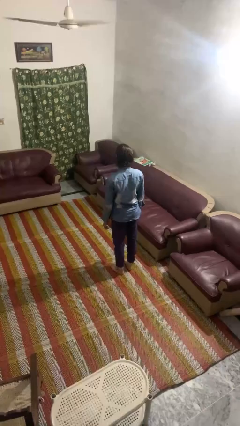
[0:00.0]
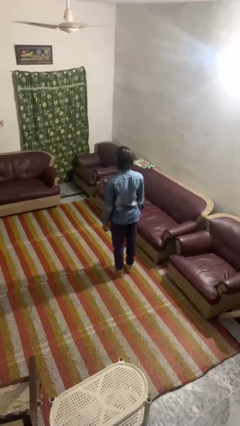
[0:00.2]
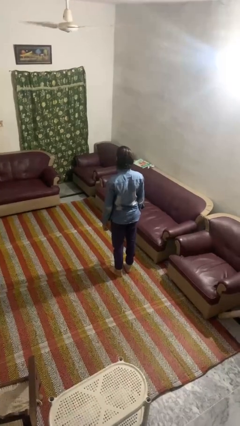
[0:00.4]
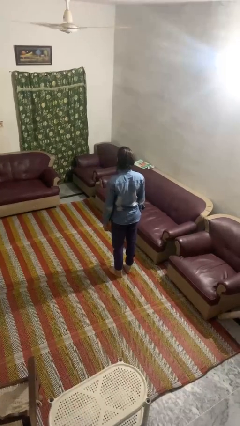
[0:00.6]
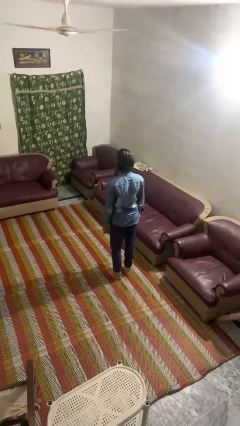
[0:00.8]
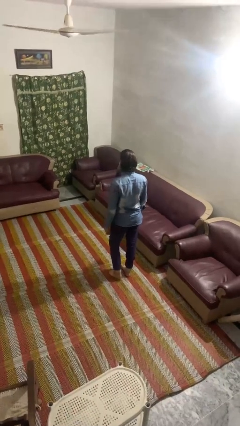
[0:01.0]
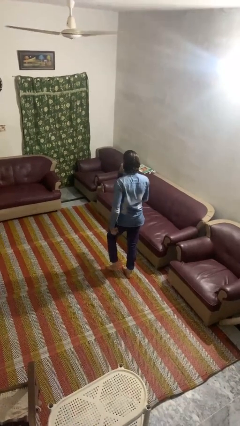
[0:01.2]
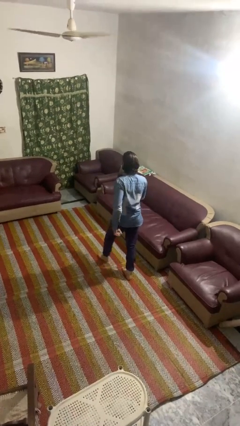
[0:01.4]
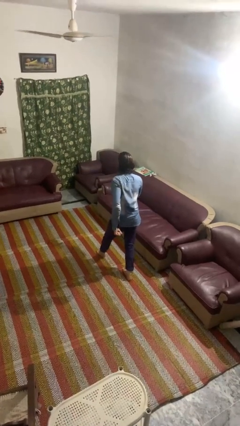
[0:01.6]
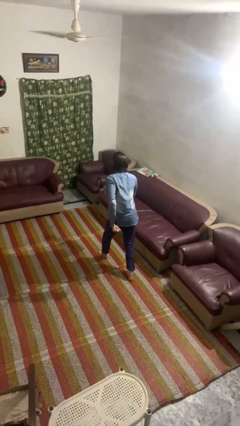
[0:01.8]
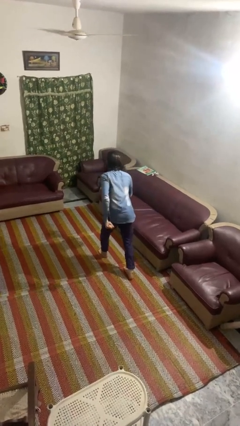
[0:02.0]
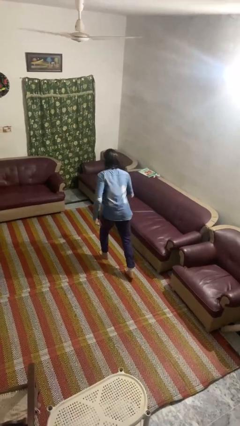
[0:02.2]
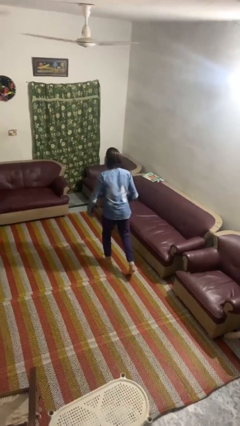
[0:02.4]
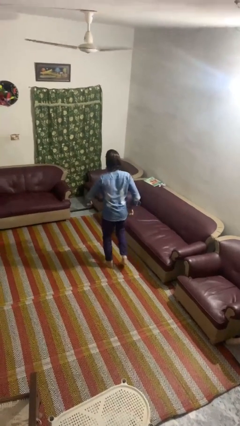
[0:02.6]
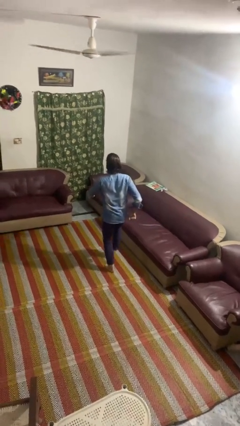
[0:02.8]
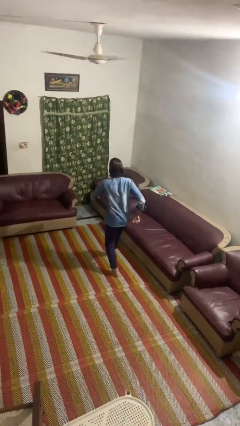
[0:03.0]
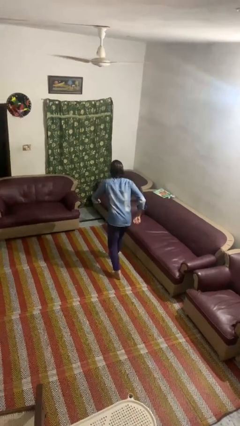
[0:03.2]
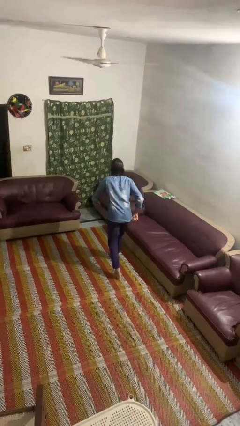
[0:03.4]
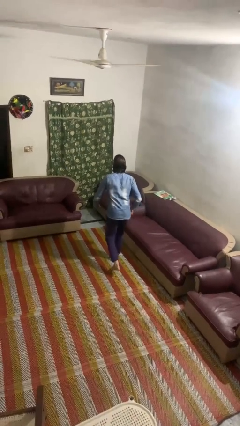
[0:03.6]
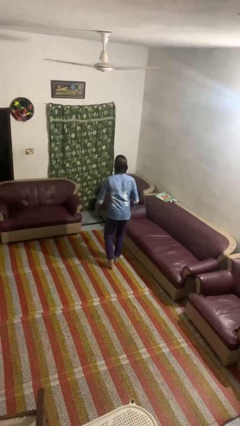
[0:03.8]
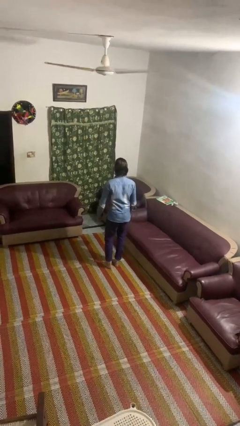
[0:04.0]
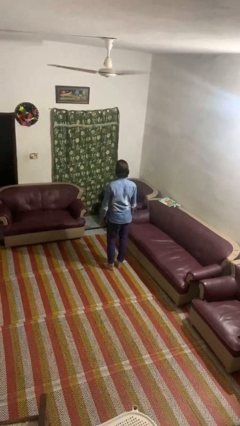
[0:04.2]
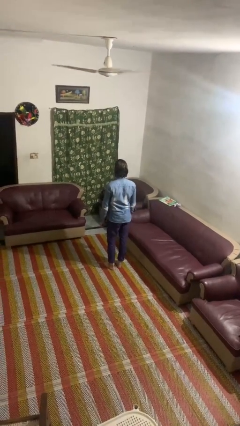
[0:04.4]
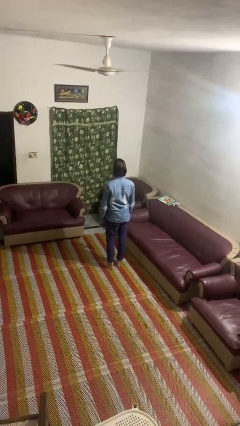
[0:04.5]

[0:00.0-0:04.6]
person walks tiptoe

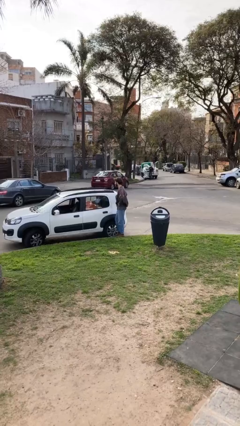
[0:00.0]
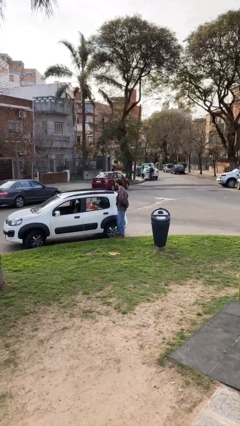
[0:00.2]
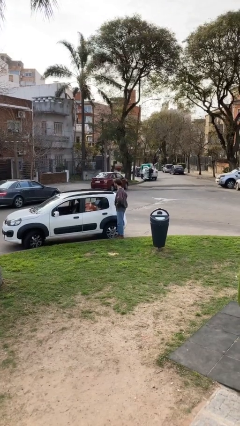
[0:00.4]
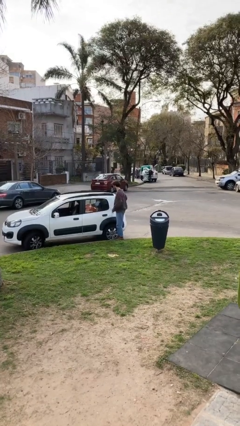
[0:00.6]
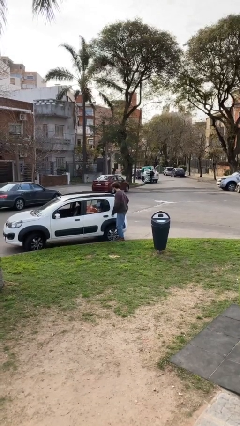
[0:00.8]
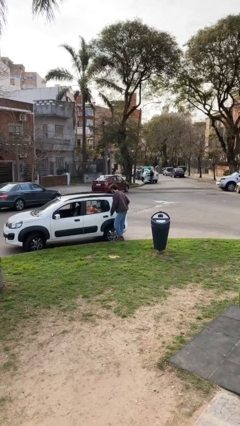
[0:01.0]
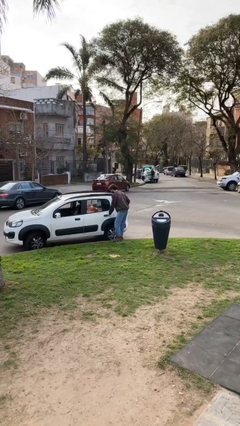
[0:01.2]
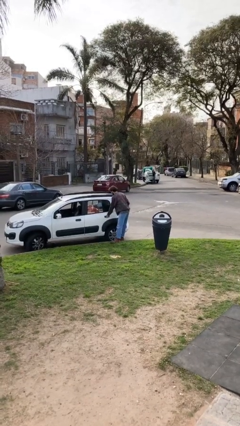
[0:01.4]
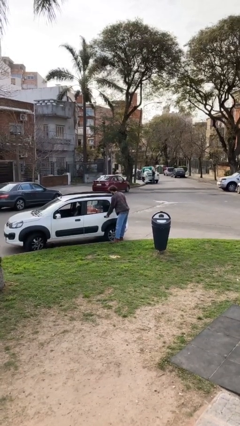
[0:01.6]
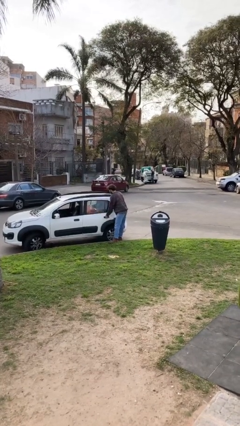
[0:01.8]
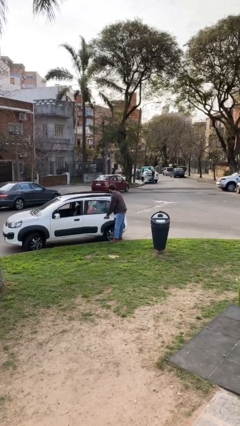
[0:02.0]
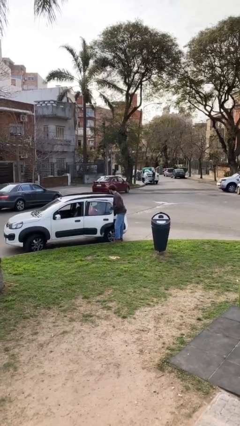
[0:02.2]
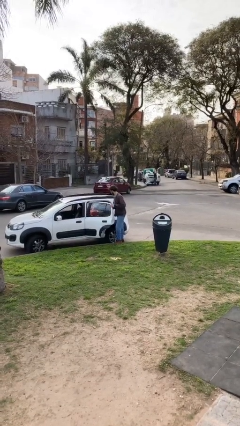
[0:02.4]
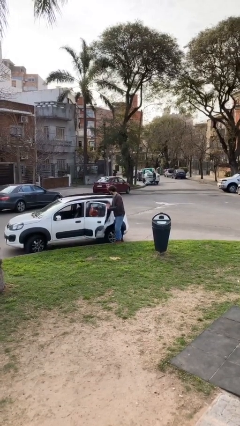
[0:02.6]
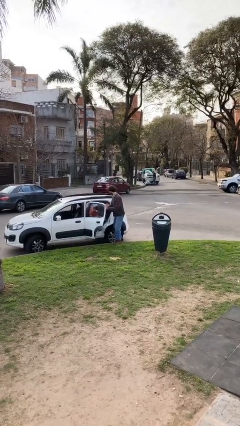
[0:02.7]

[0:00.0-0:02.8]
person opens car door

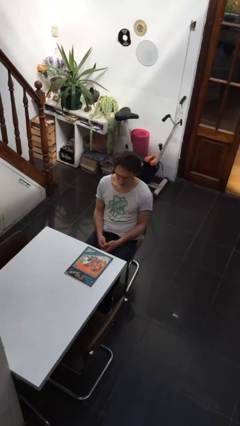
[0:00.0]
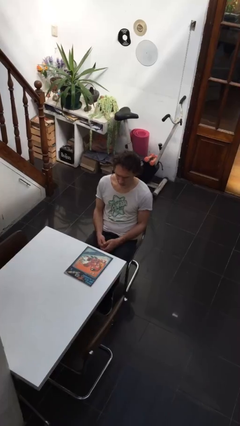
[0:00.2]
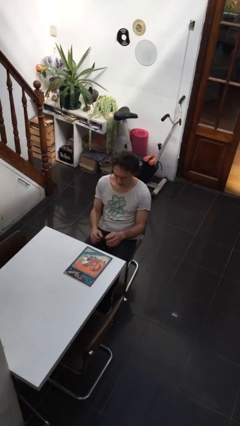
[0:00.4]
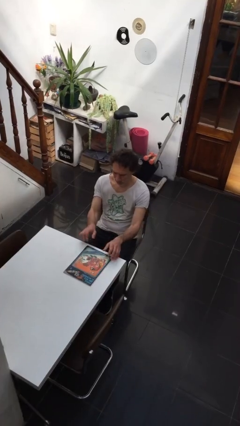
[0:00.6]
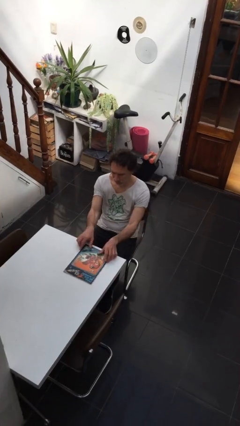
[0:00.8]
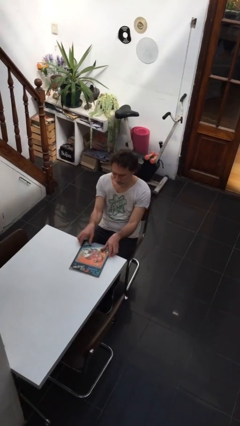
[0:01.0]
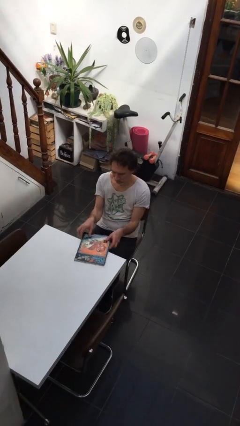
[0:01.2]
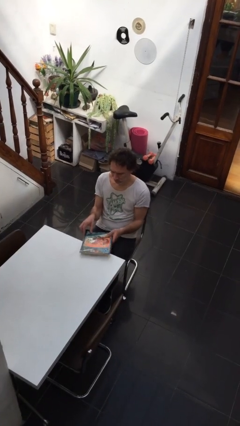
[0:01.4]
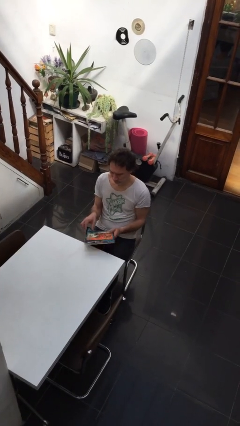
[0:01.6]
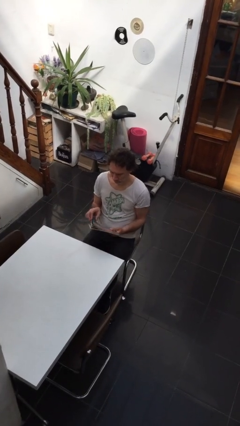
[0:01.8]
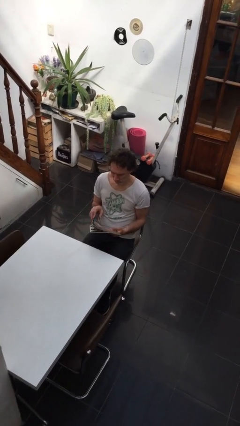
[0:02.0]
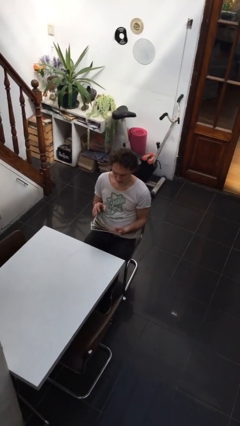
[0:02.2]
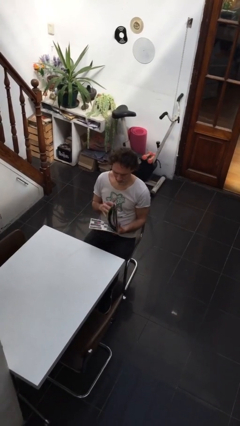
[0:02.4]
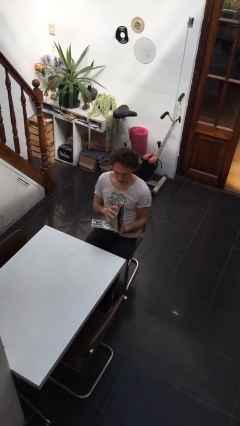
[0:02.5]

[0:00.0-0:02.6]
person picks up object from table

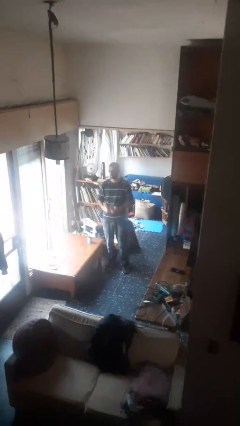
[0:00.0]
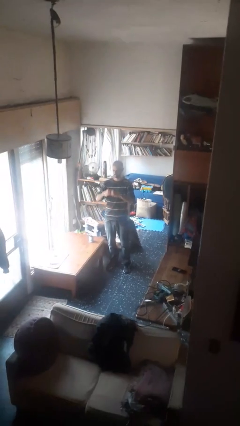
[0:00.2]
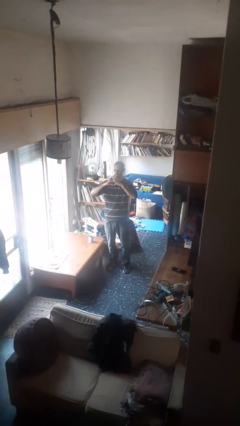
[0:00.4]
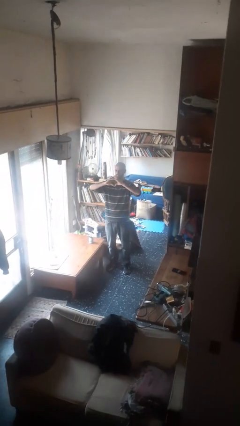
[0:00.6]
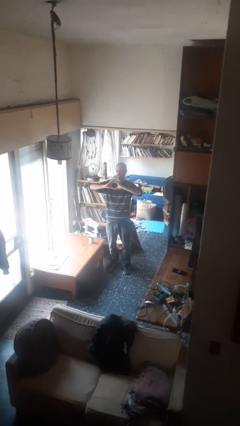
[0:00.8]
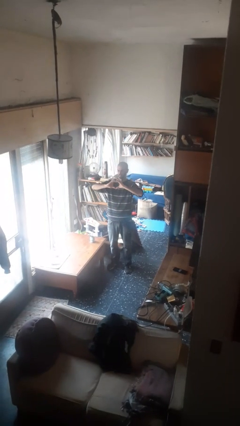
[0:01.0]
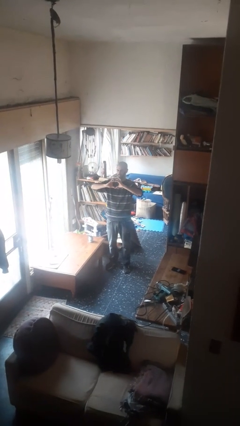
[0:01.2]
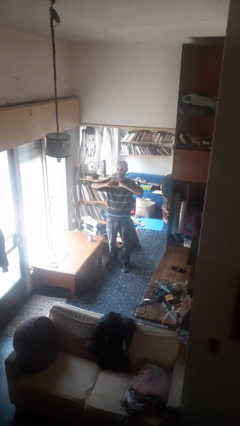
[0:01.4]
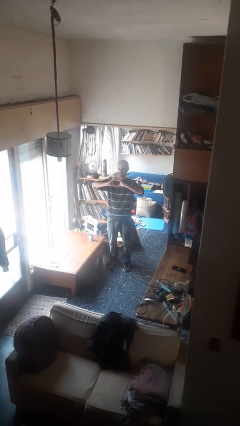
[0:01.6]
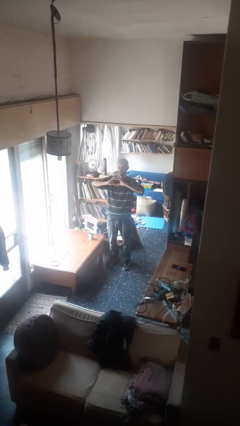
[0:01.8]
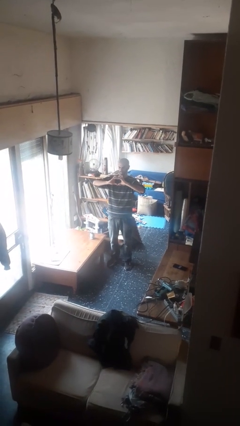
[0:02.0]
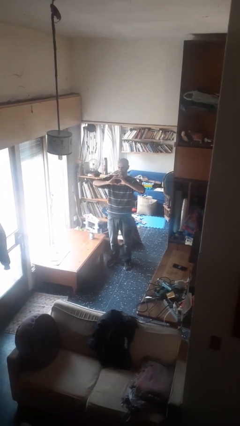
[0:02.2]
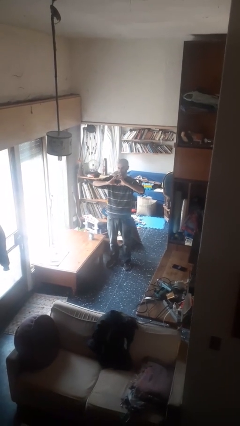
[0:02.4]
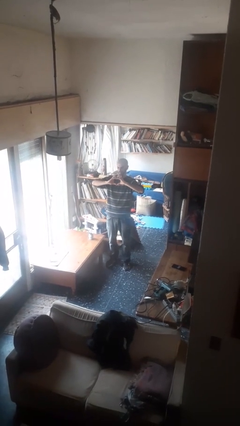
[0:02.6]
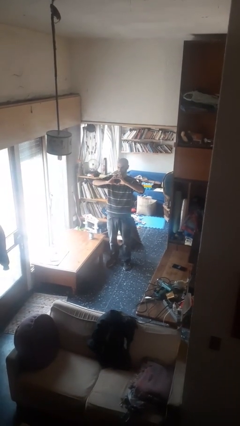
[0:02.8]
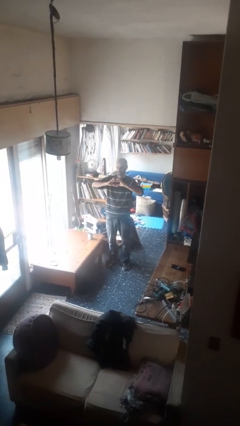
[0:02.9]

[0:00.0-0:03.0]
person gestures heart

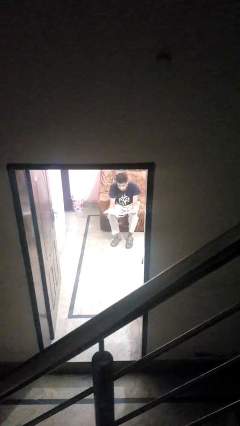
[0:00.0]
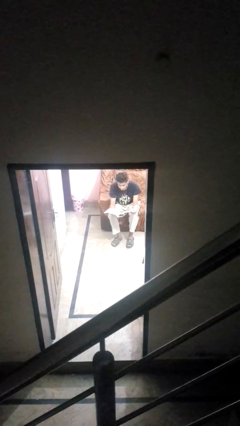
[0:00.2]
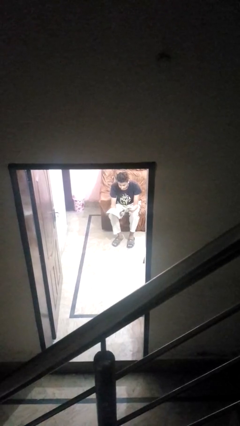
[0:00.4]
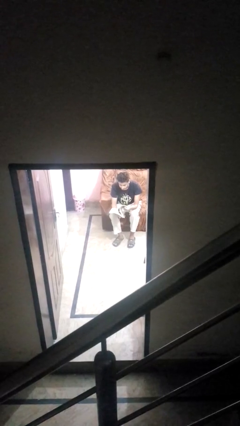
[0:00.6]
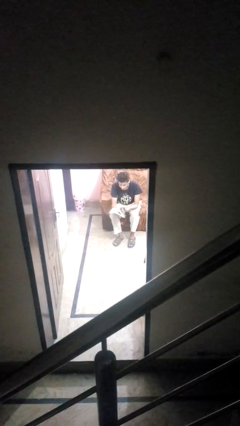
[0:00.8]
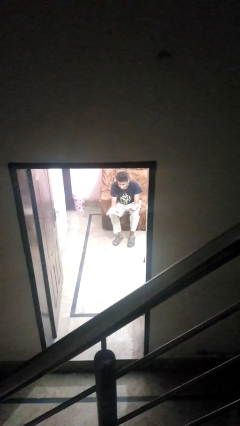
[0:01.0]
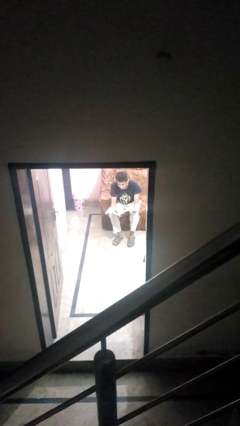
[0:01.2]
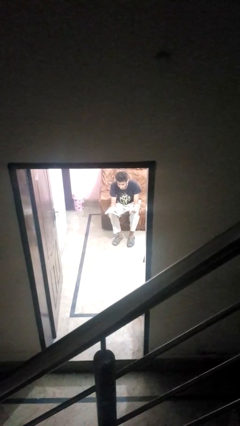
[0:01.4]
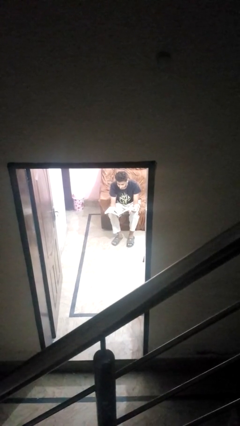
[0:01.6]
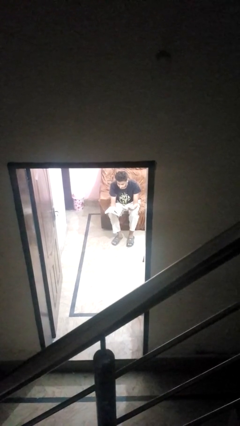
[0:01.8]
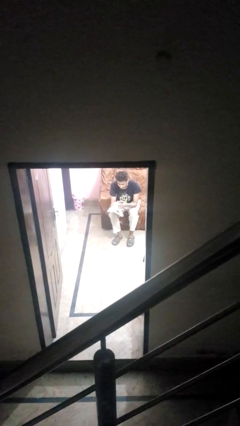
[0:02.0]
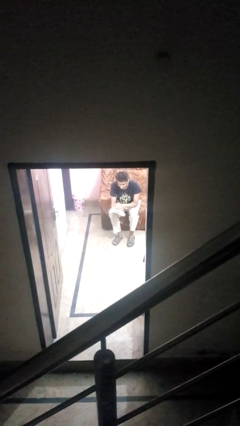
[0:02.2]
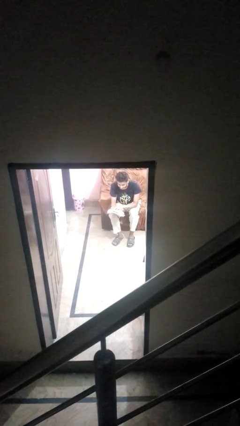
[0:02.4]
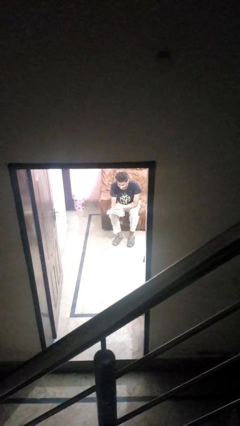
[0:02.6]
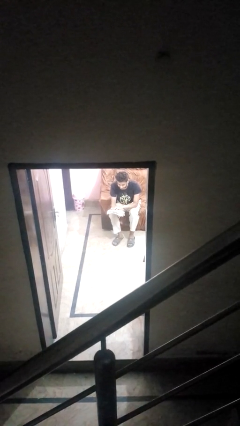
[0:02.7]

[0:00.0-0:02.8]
person reads magazine

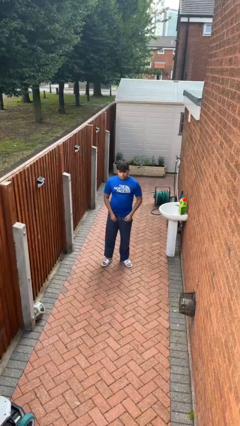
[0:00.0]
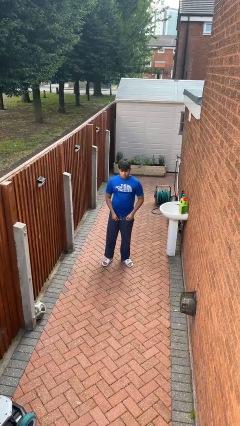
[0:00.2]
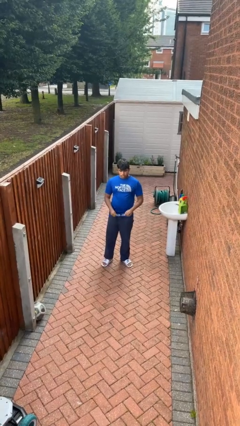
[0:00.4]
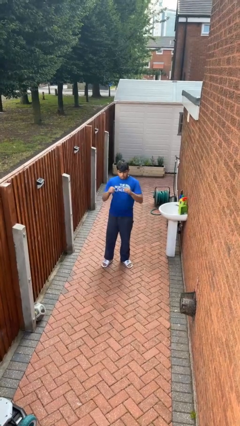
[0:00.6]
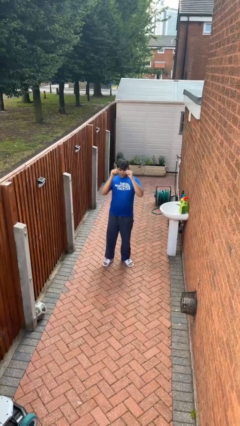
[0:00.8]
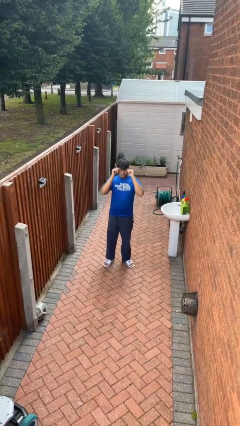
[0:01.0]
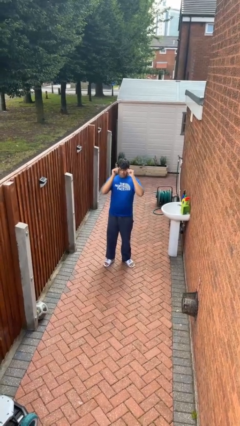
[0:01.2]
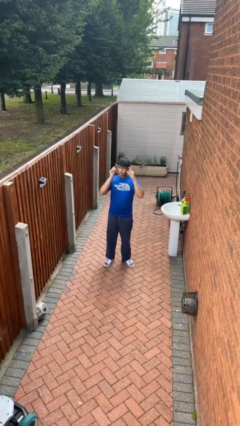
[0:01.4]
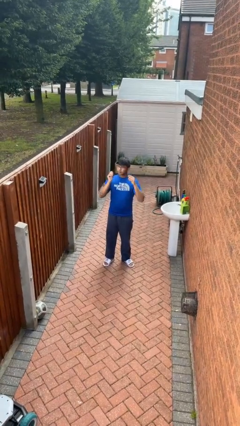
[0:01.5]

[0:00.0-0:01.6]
person puts on glasses
